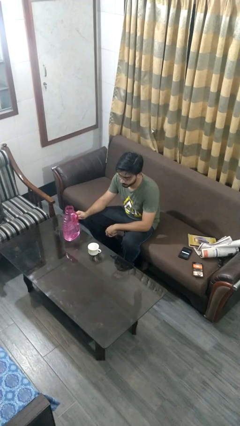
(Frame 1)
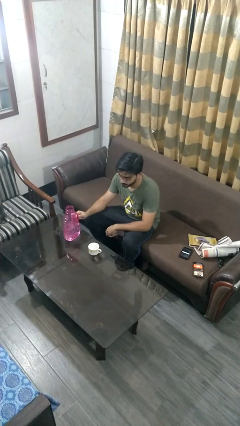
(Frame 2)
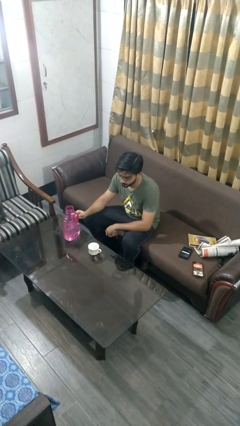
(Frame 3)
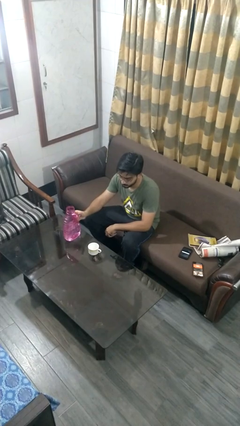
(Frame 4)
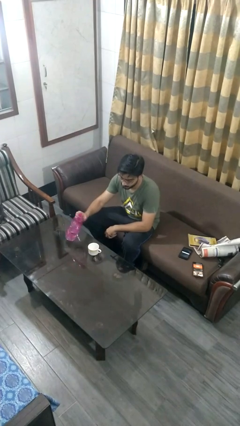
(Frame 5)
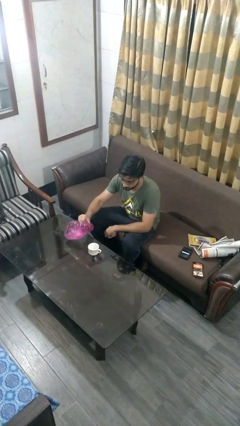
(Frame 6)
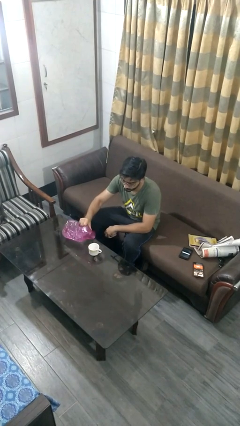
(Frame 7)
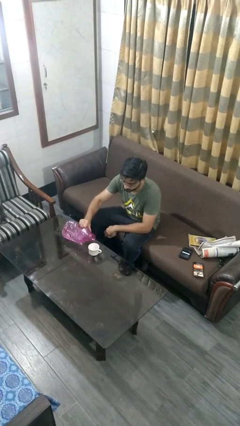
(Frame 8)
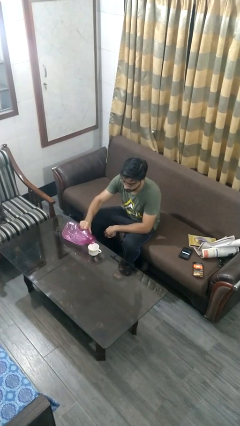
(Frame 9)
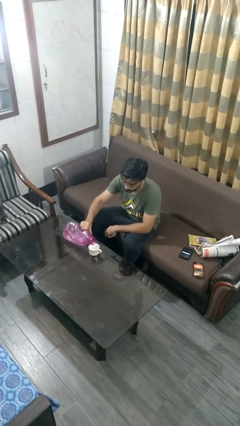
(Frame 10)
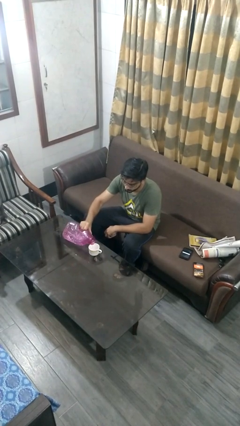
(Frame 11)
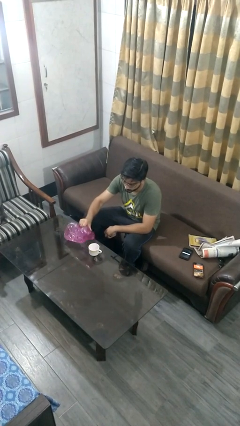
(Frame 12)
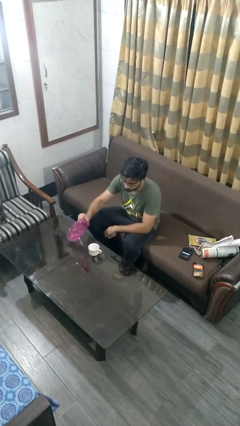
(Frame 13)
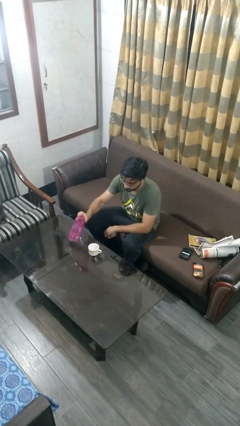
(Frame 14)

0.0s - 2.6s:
person pours liquid into cup

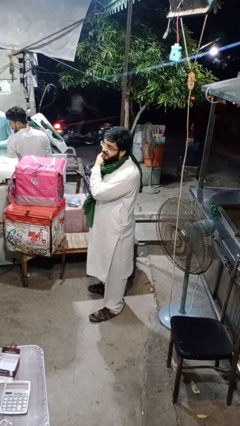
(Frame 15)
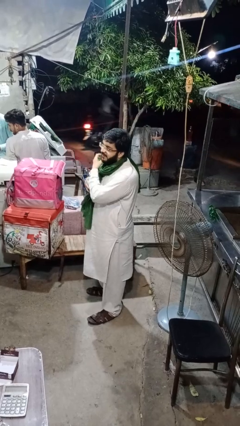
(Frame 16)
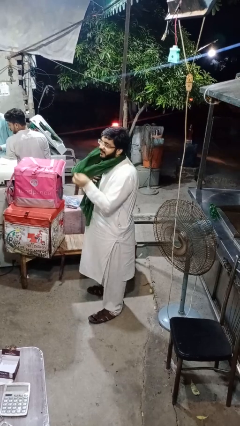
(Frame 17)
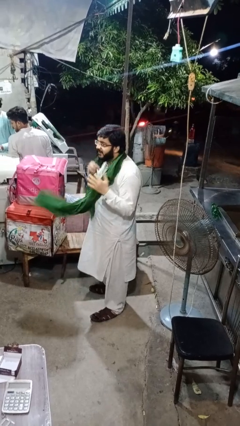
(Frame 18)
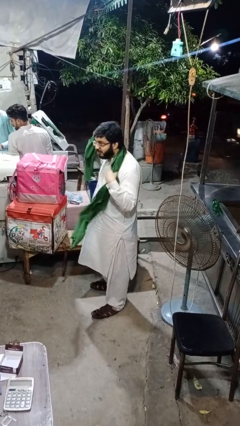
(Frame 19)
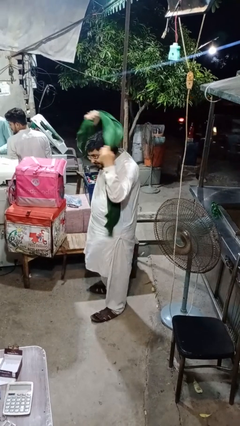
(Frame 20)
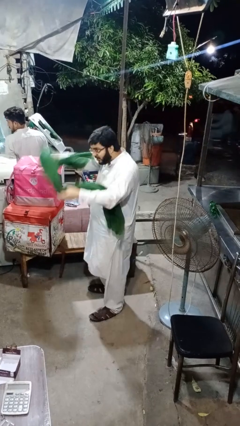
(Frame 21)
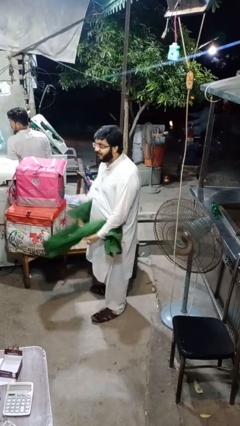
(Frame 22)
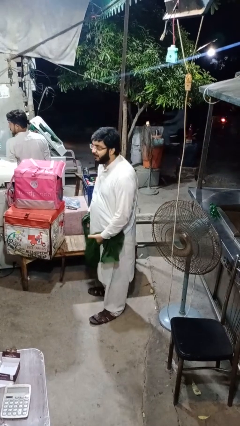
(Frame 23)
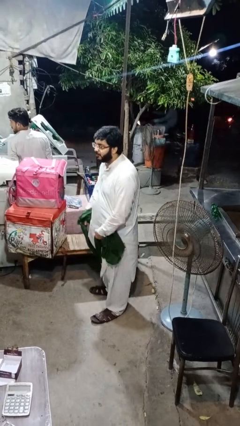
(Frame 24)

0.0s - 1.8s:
person takes off scarf

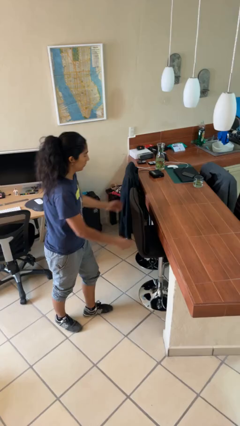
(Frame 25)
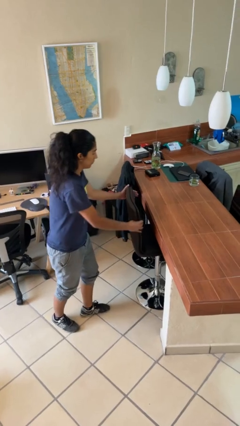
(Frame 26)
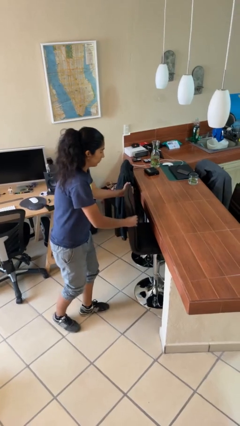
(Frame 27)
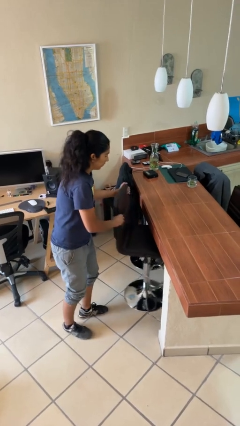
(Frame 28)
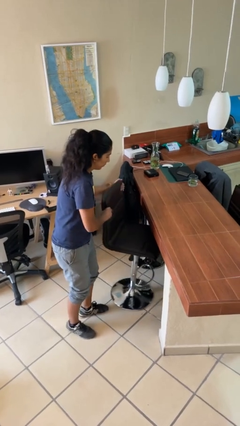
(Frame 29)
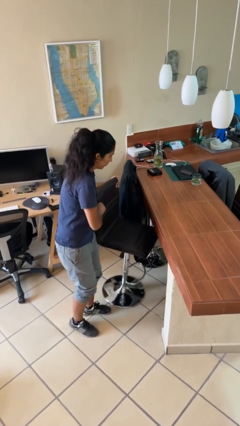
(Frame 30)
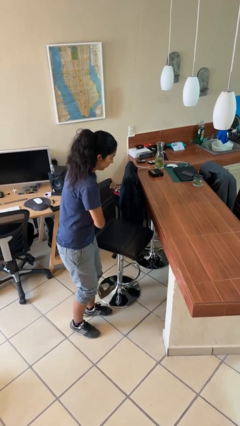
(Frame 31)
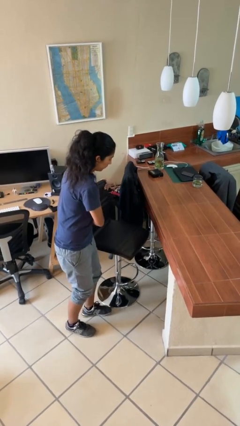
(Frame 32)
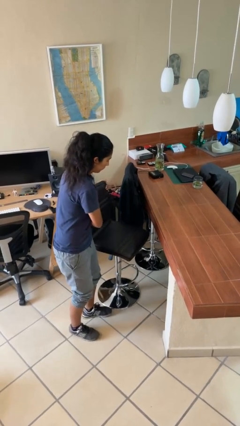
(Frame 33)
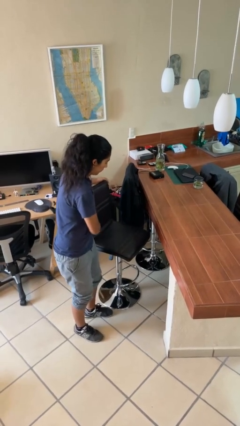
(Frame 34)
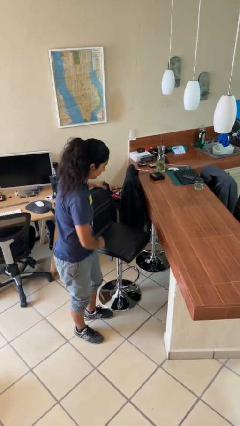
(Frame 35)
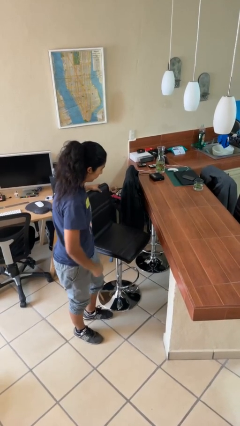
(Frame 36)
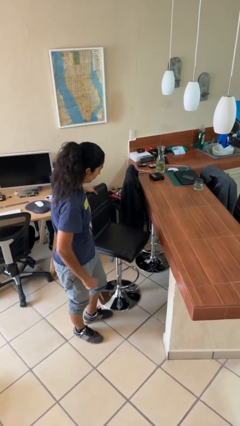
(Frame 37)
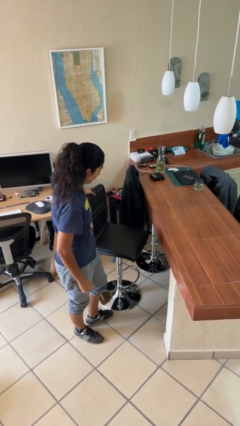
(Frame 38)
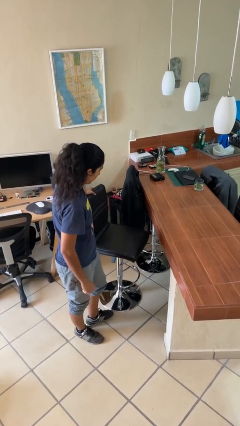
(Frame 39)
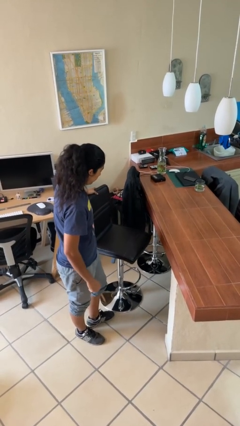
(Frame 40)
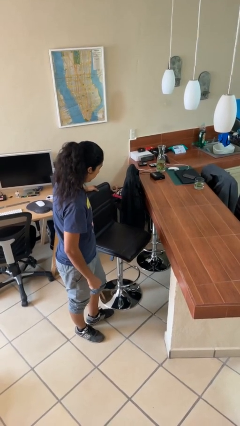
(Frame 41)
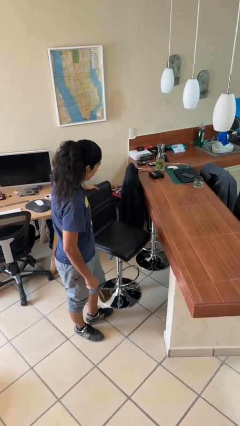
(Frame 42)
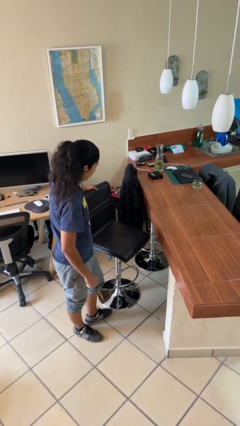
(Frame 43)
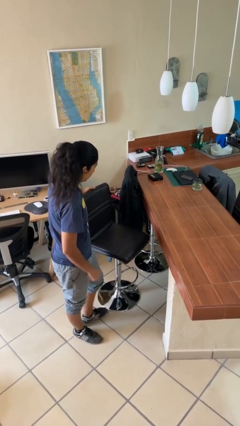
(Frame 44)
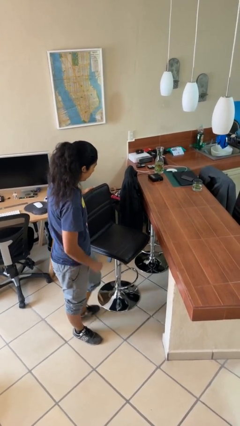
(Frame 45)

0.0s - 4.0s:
person pulls out chair

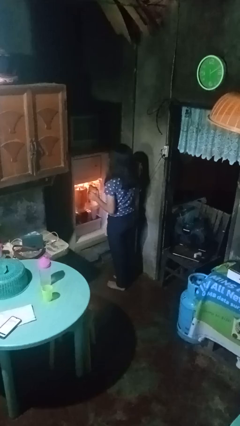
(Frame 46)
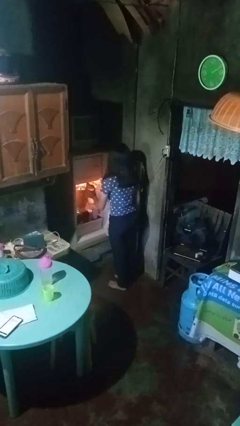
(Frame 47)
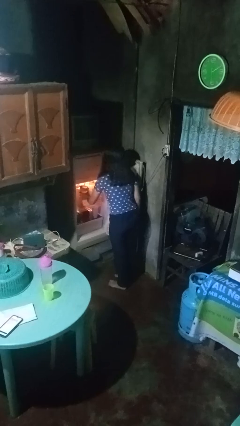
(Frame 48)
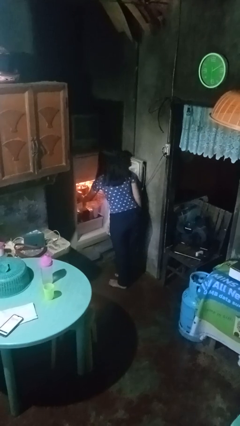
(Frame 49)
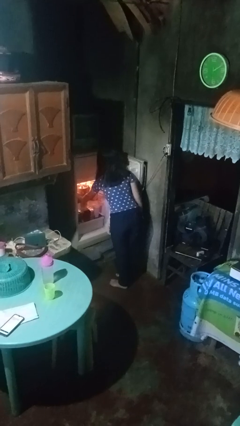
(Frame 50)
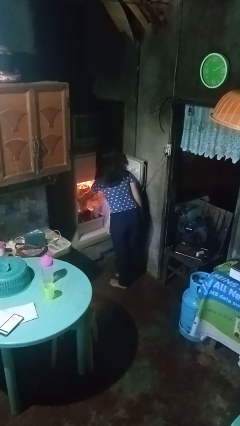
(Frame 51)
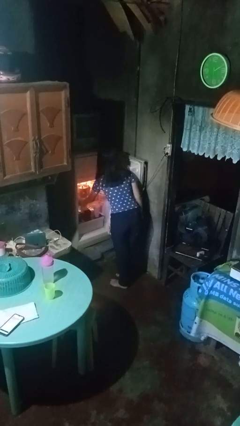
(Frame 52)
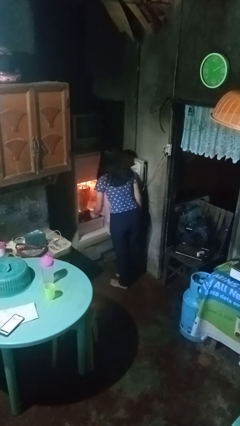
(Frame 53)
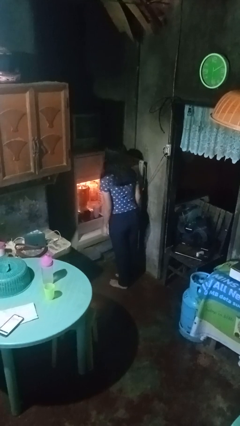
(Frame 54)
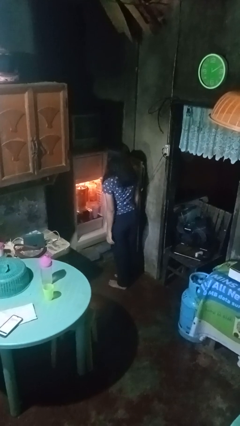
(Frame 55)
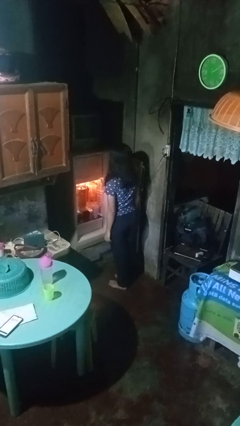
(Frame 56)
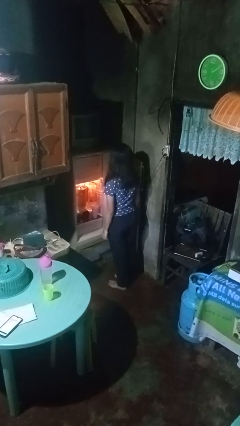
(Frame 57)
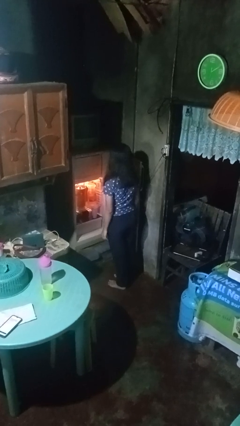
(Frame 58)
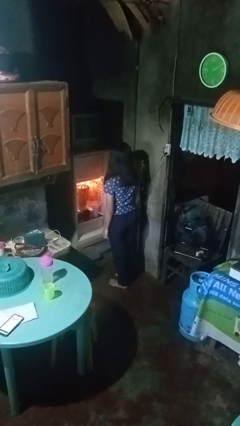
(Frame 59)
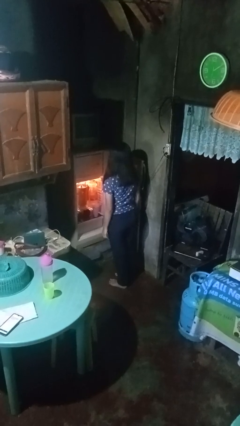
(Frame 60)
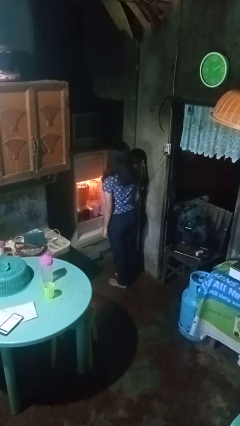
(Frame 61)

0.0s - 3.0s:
person puts object into refrigerator

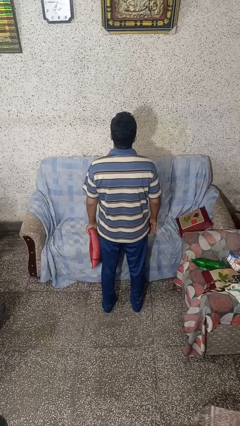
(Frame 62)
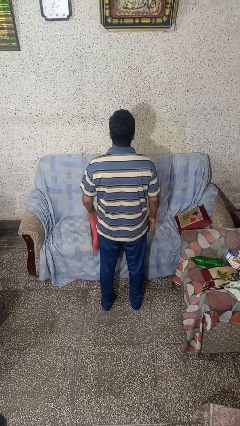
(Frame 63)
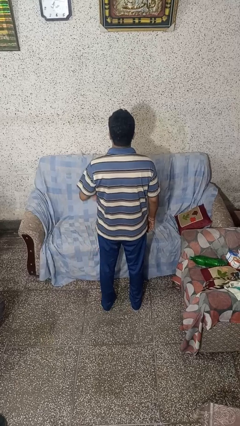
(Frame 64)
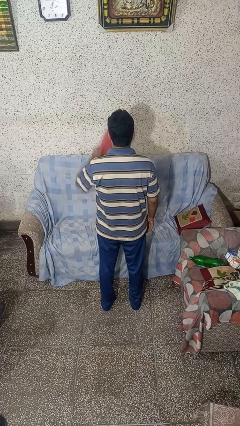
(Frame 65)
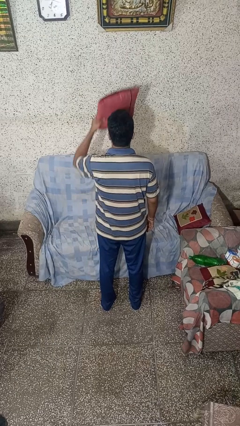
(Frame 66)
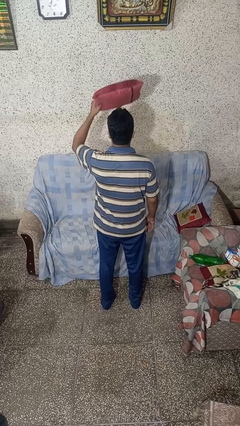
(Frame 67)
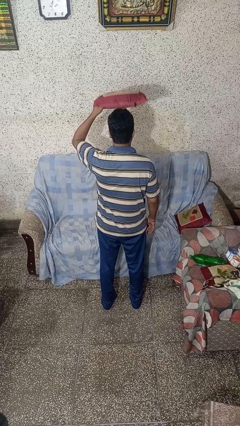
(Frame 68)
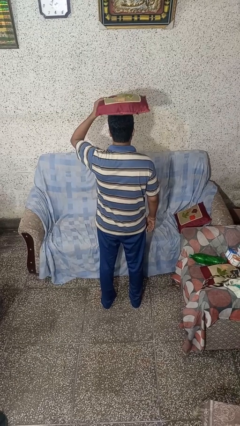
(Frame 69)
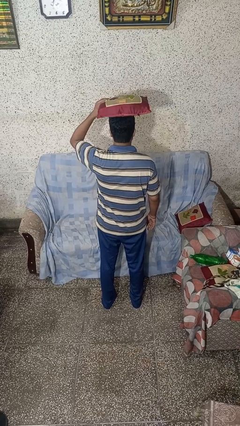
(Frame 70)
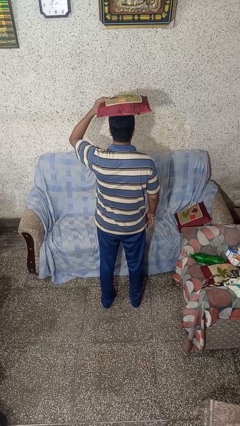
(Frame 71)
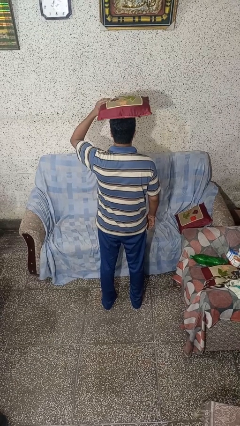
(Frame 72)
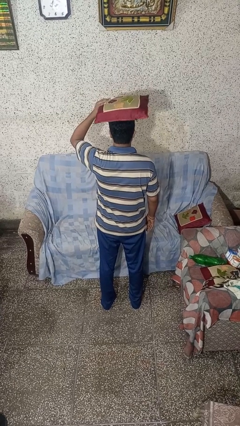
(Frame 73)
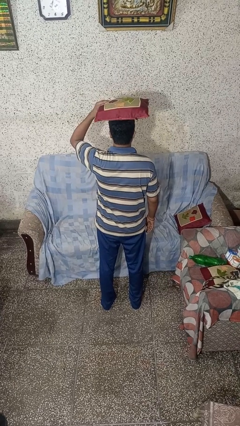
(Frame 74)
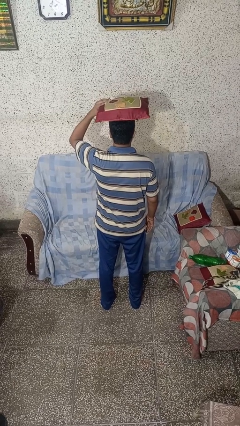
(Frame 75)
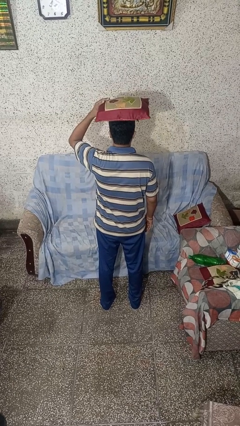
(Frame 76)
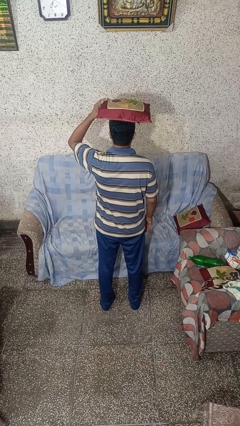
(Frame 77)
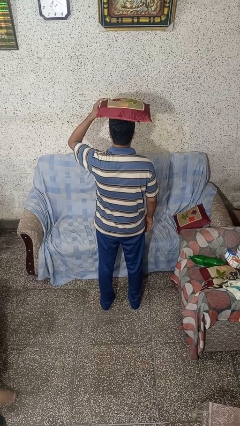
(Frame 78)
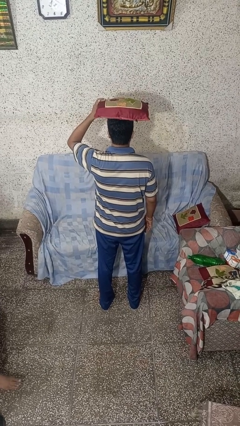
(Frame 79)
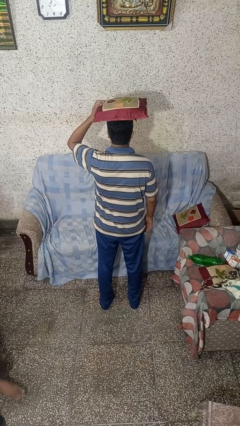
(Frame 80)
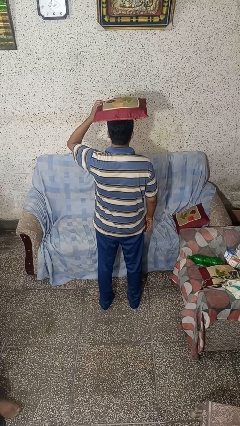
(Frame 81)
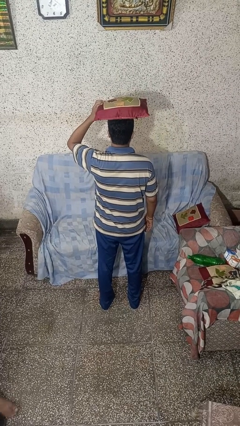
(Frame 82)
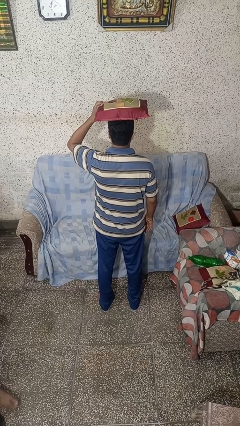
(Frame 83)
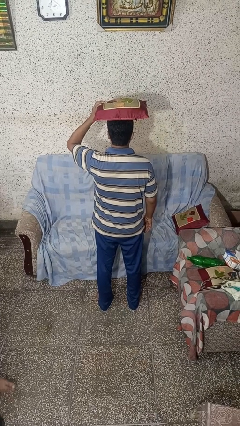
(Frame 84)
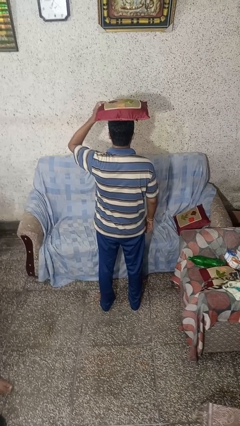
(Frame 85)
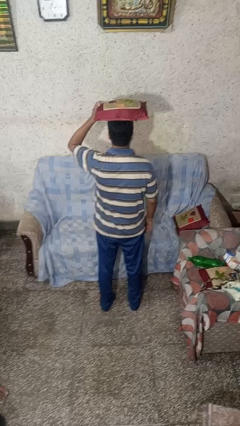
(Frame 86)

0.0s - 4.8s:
person holds object above head

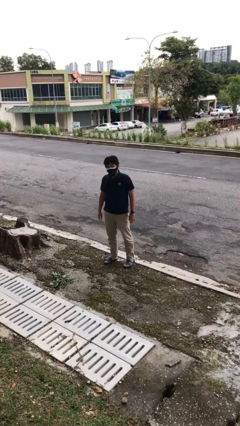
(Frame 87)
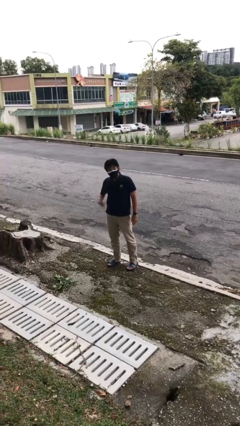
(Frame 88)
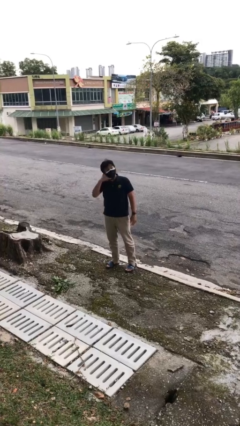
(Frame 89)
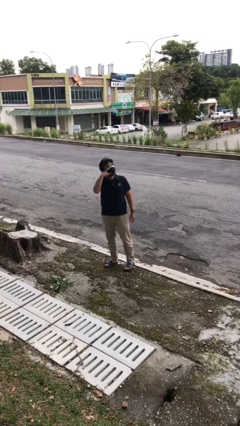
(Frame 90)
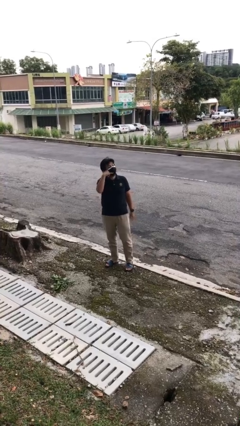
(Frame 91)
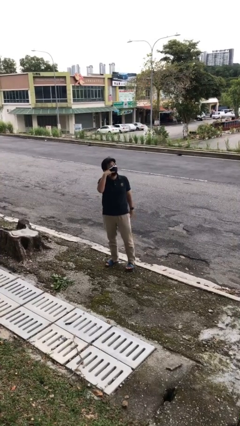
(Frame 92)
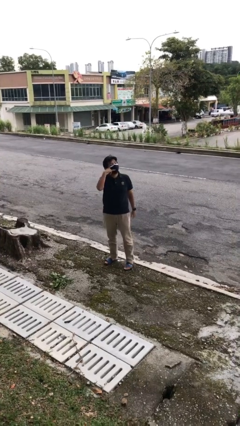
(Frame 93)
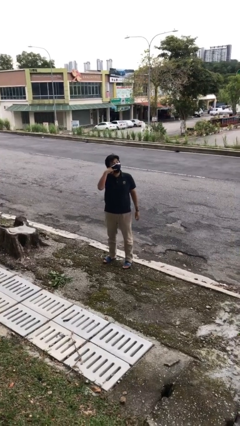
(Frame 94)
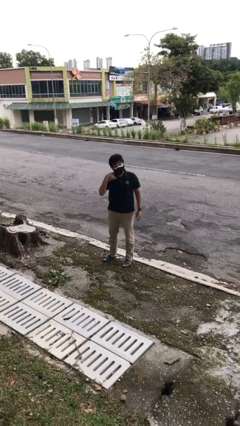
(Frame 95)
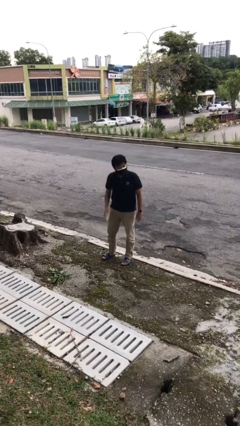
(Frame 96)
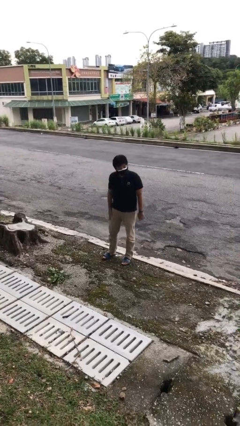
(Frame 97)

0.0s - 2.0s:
person gestures call me
